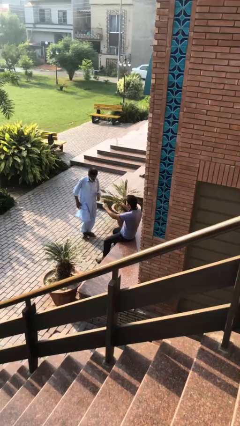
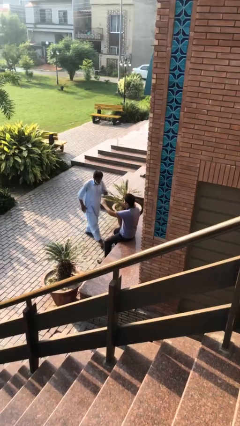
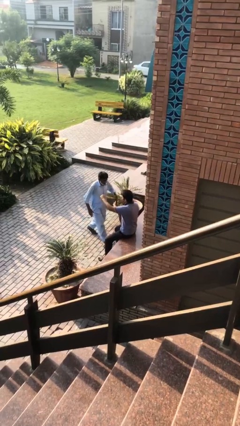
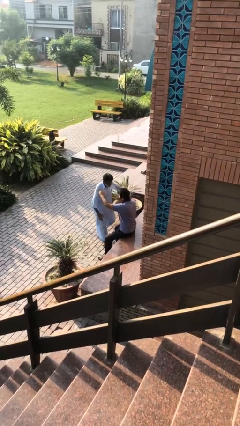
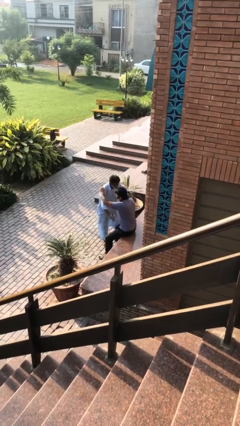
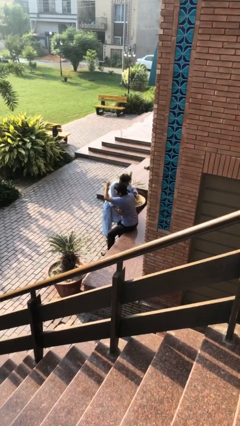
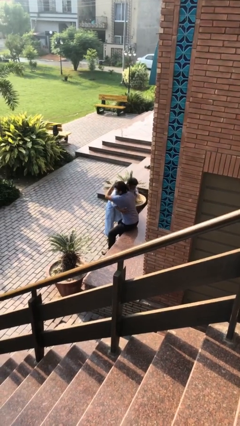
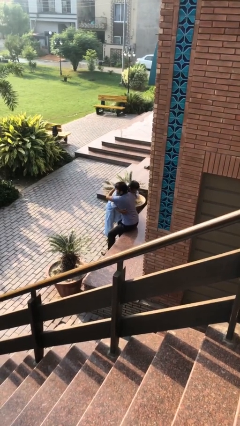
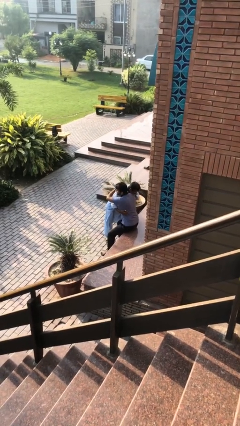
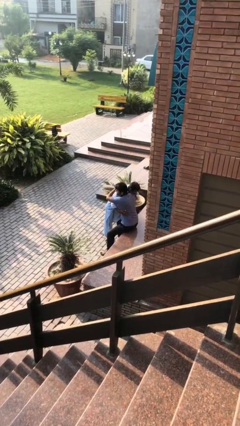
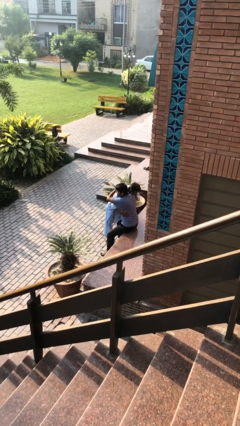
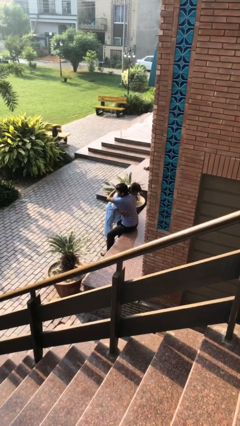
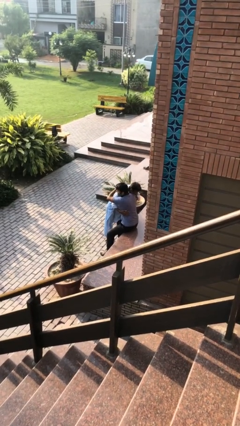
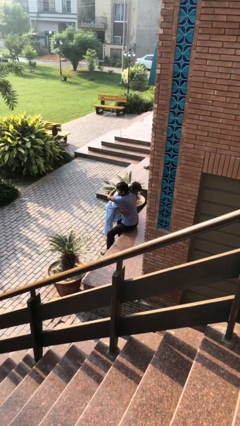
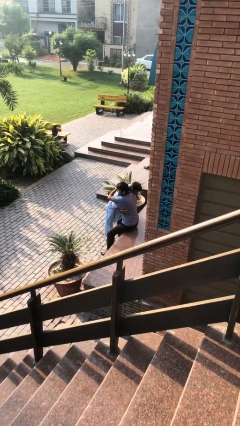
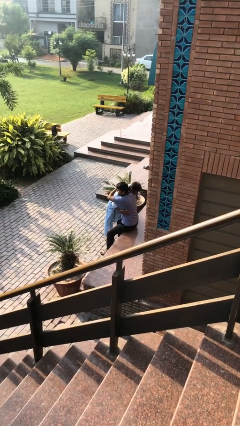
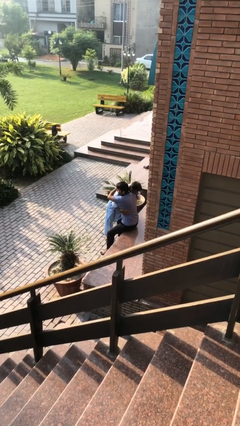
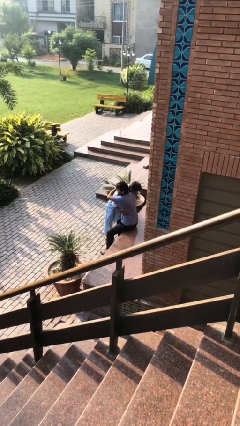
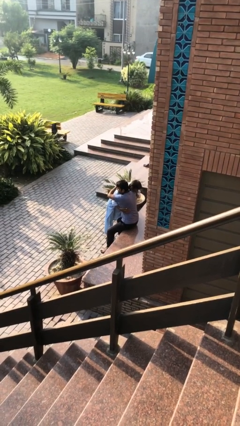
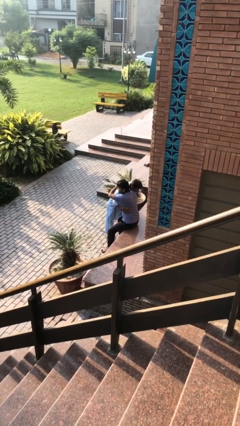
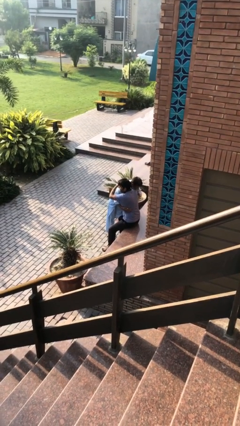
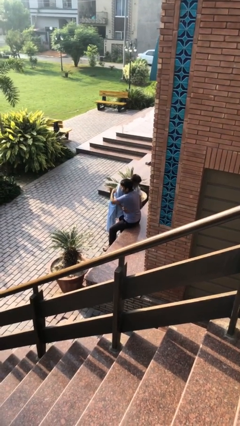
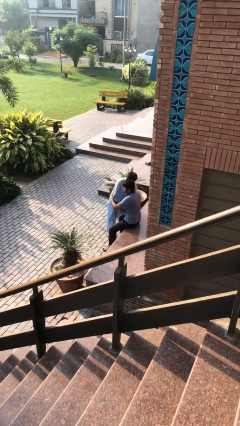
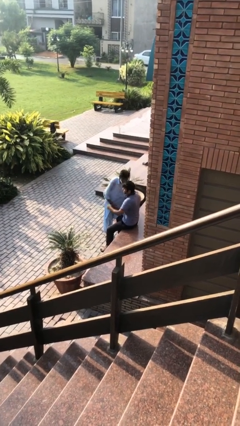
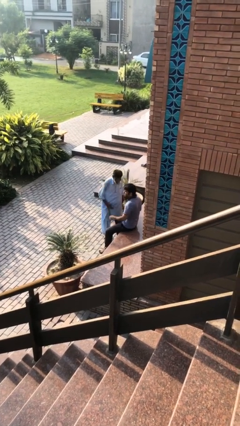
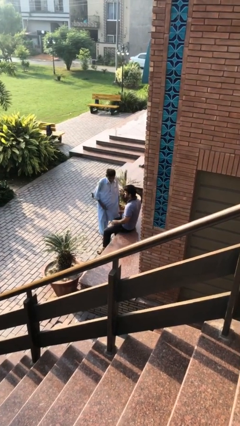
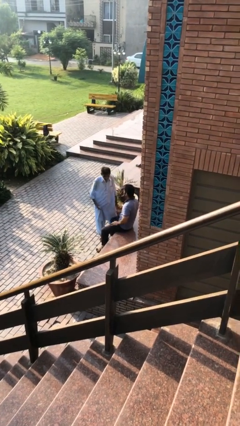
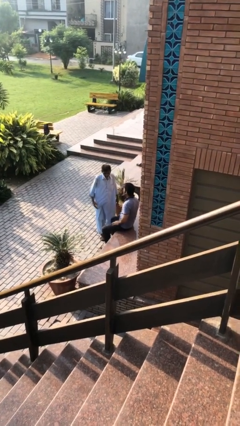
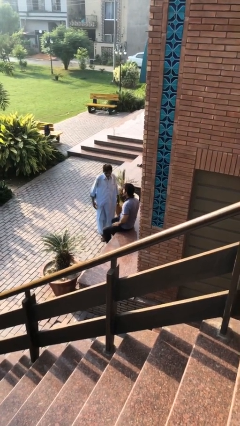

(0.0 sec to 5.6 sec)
person embraces person

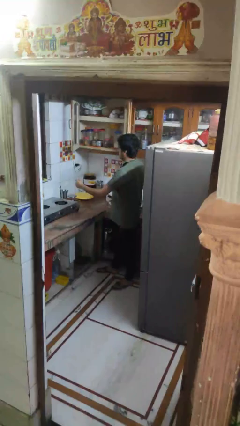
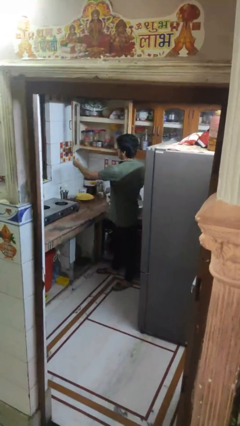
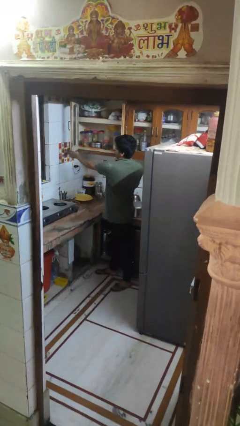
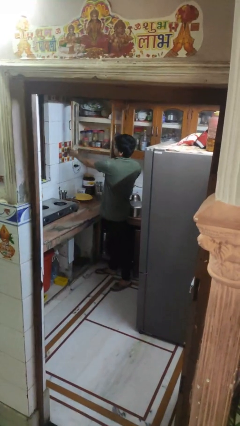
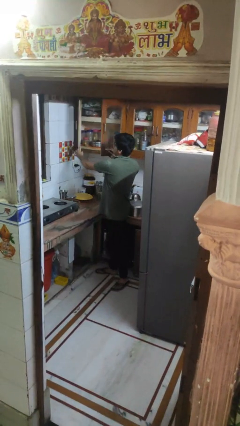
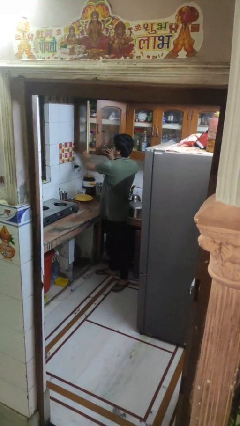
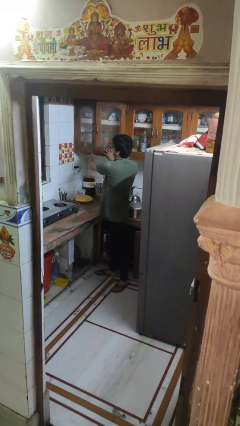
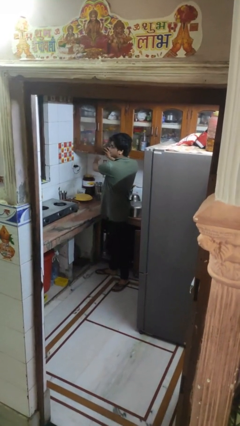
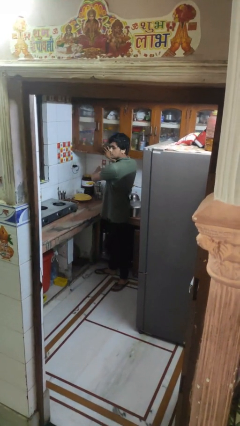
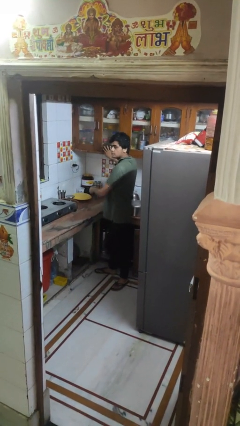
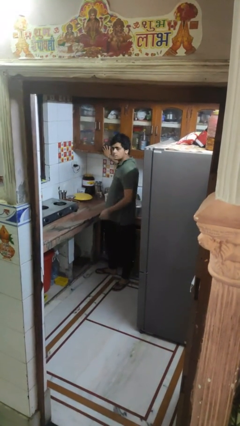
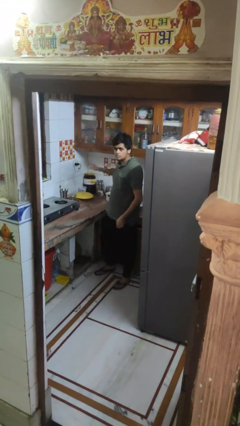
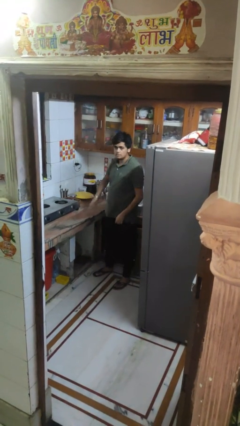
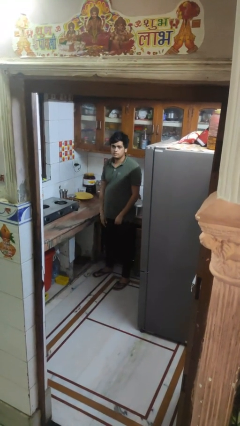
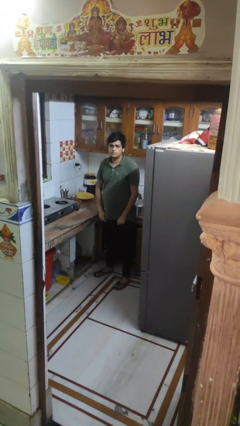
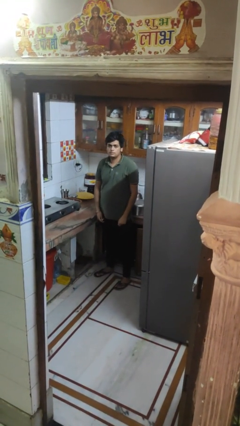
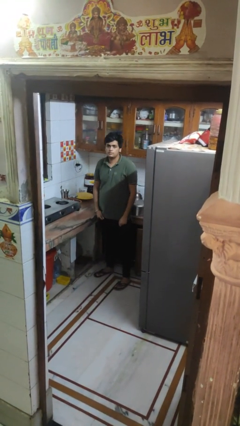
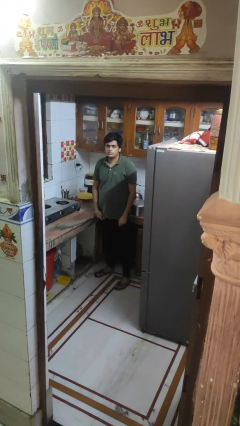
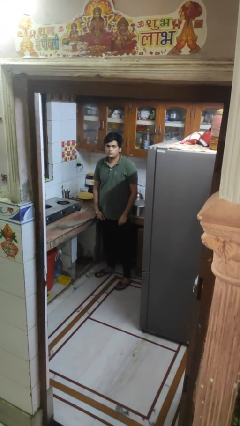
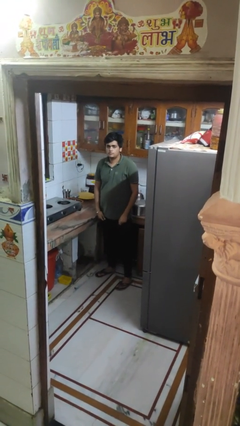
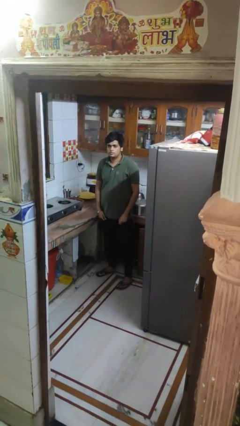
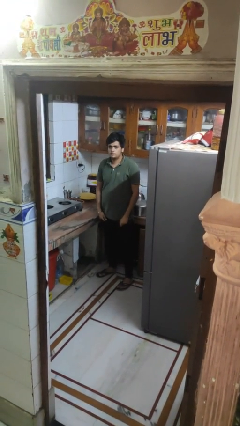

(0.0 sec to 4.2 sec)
person closes cabinet

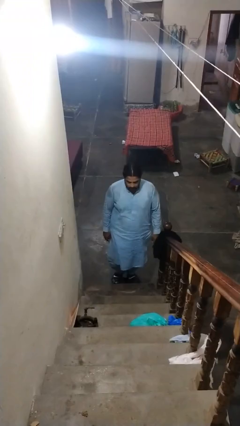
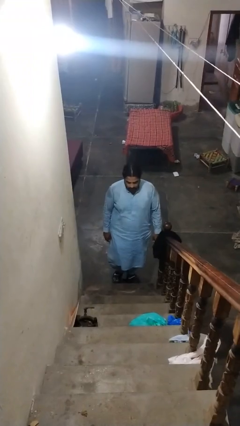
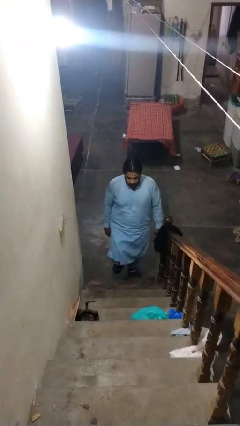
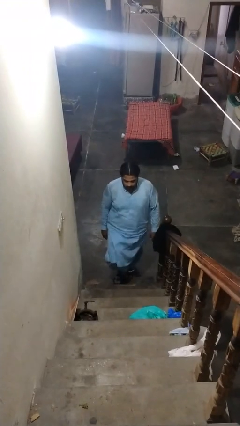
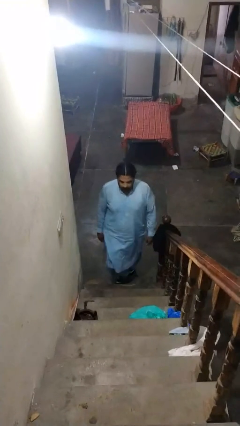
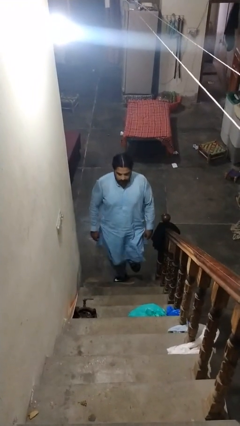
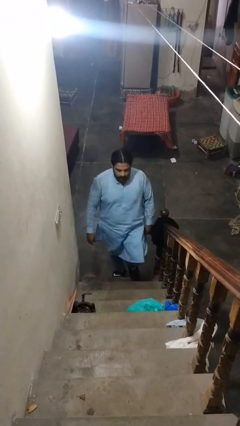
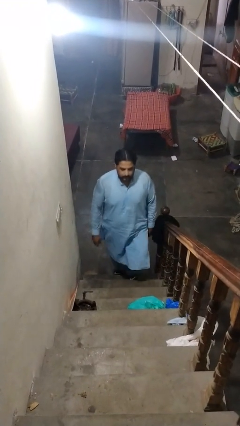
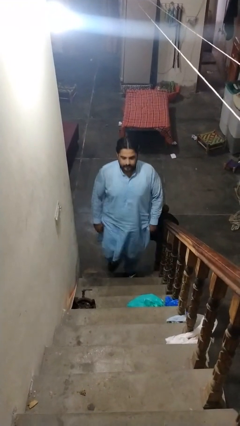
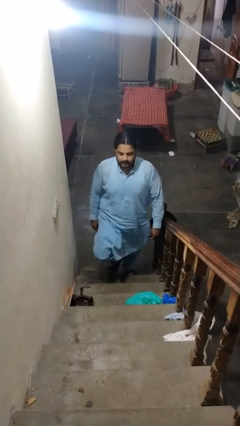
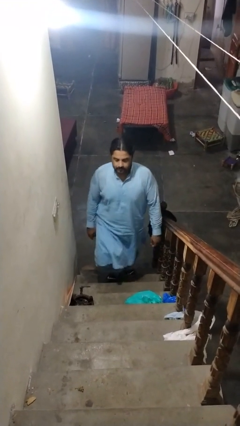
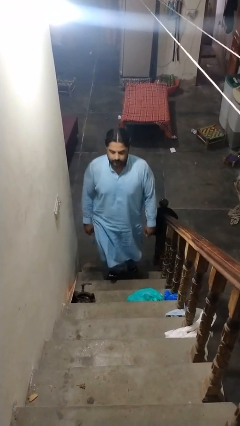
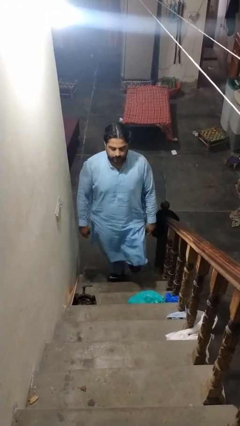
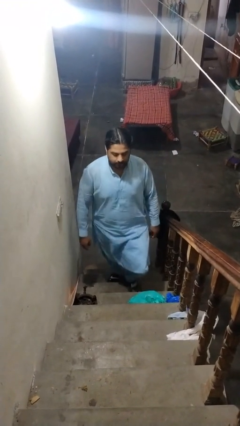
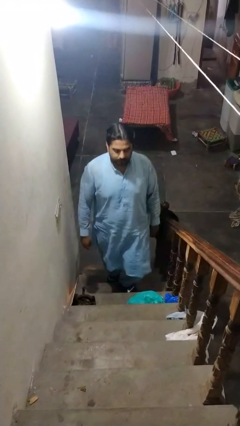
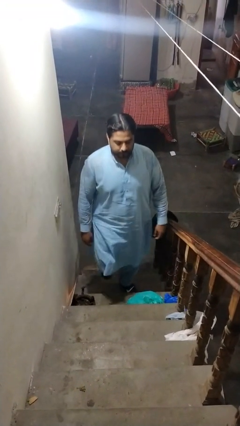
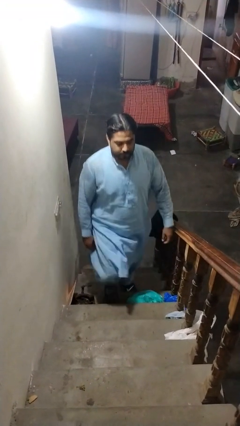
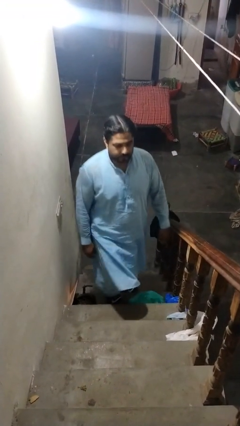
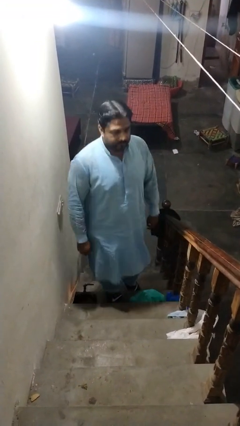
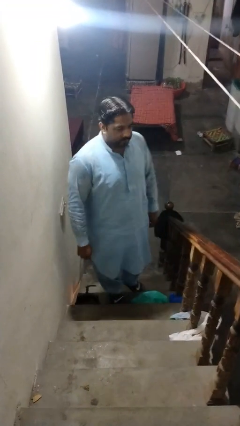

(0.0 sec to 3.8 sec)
person climbs up stairs

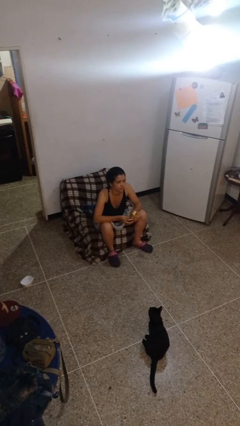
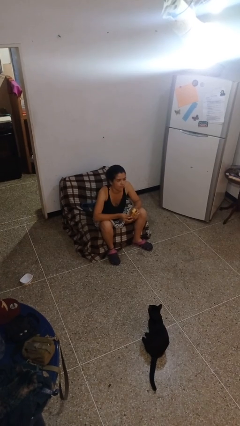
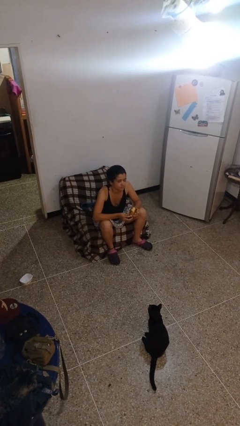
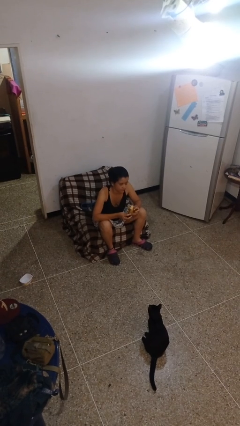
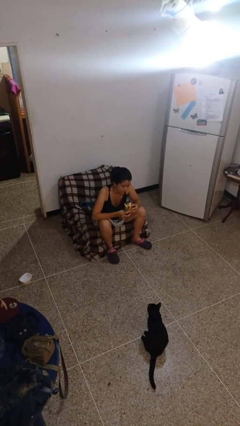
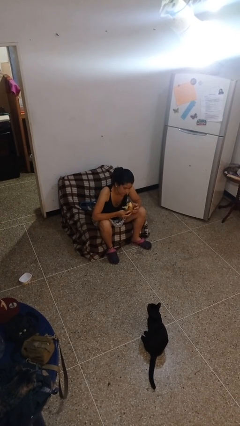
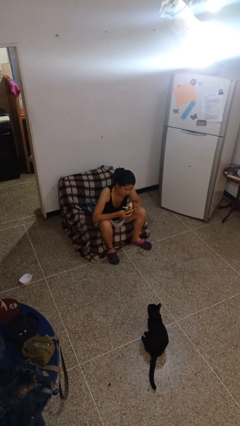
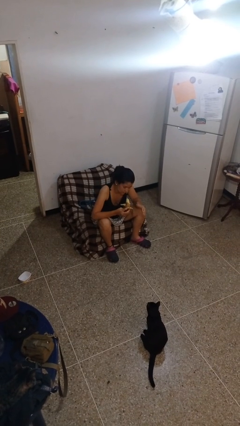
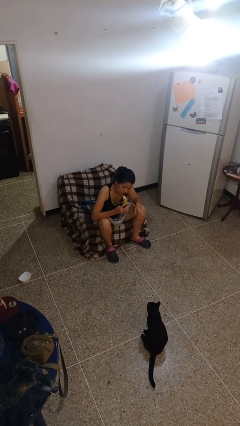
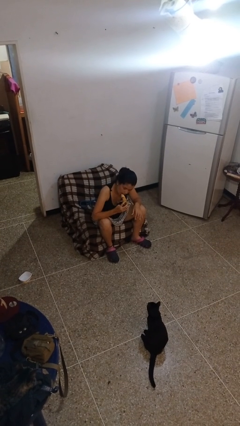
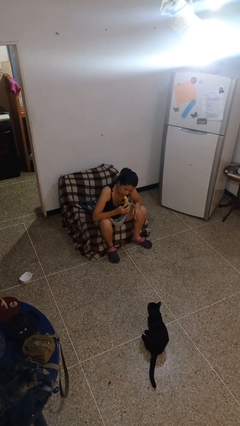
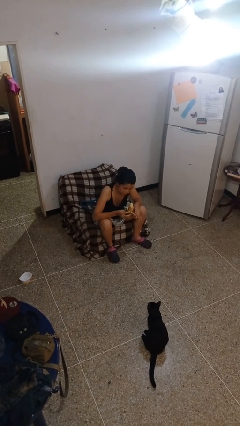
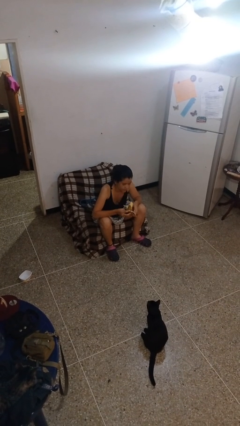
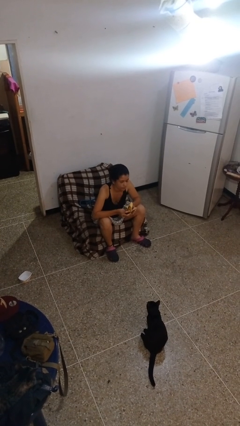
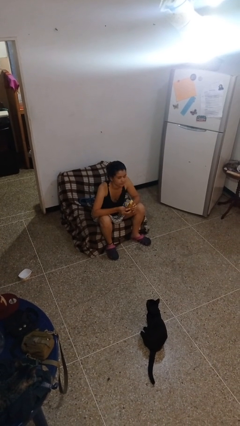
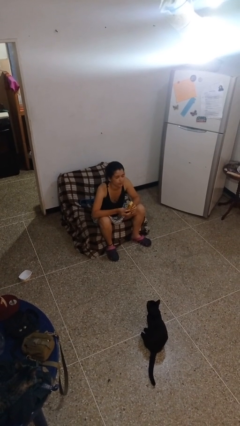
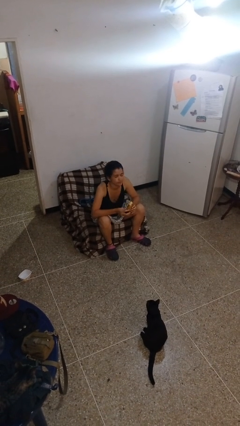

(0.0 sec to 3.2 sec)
person eats banana

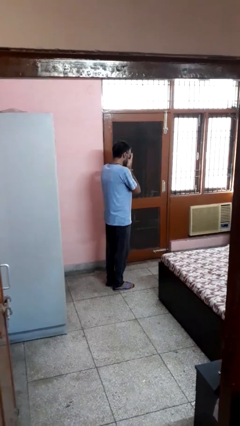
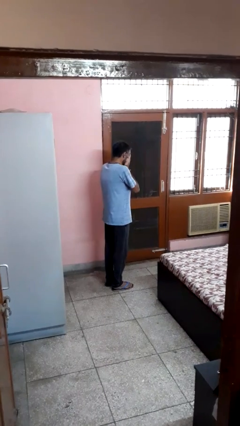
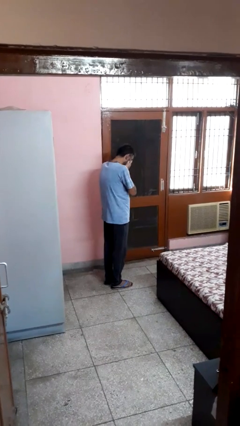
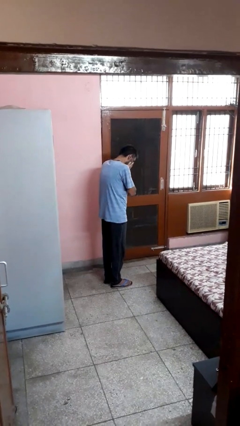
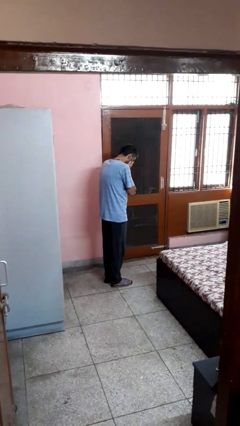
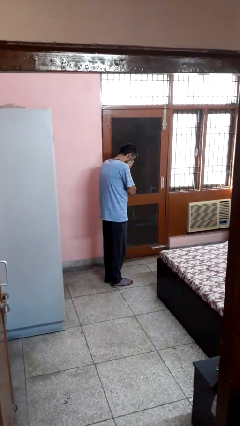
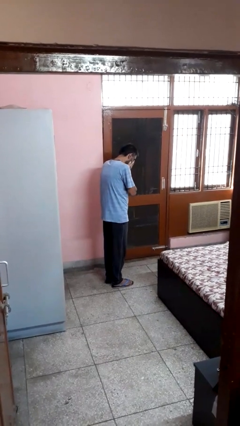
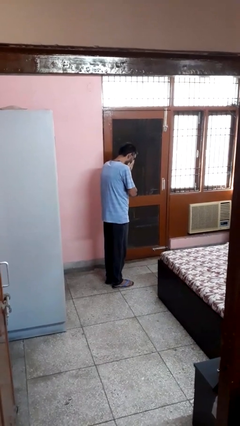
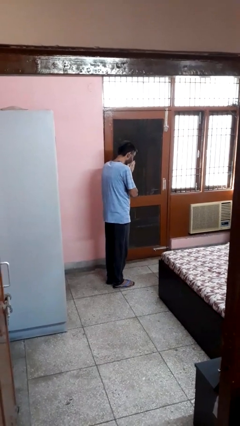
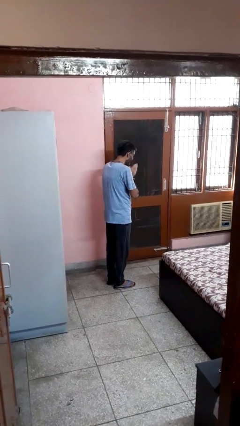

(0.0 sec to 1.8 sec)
person sneezes into hand
